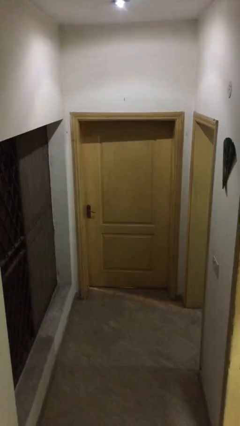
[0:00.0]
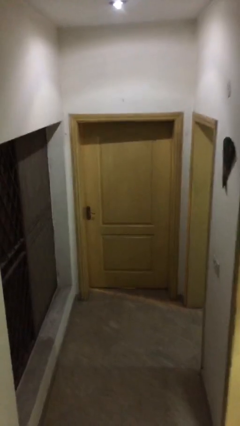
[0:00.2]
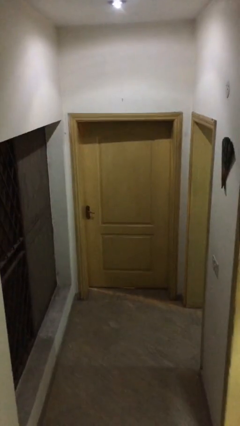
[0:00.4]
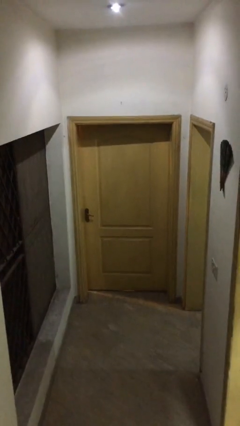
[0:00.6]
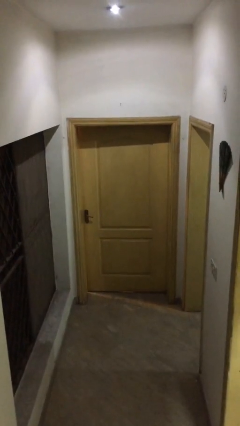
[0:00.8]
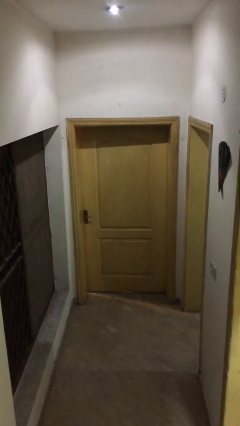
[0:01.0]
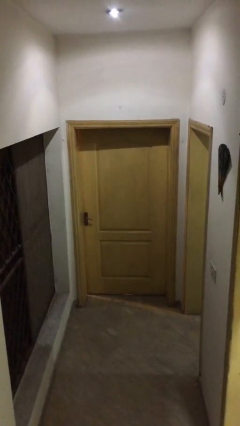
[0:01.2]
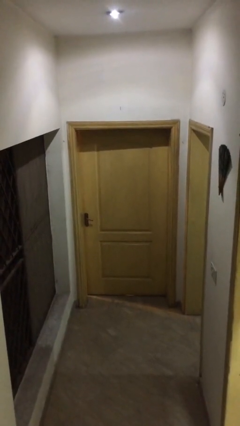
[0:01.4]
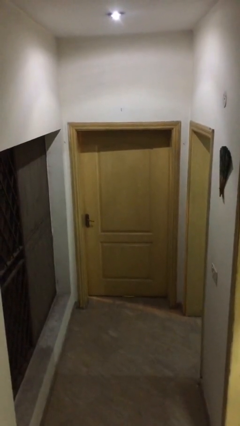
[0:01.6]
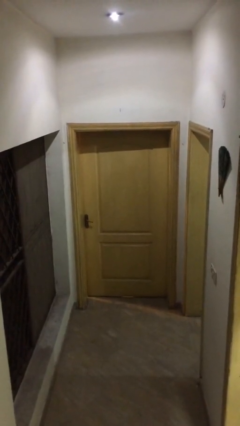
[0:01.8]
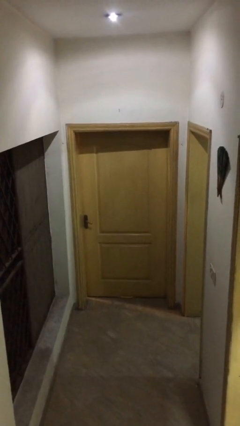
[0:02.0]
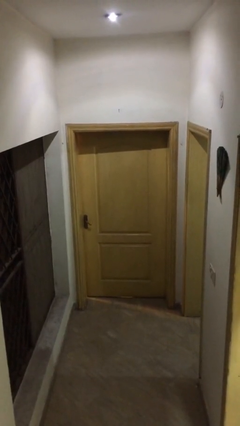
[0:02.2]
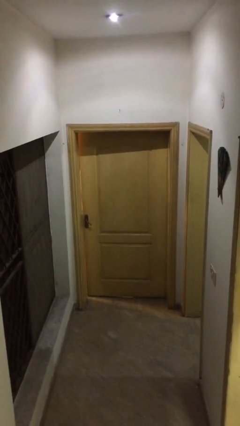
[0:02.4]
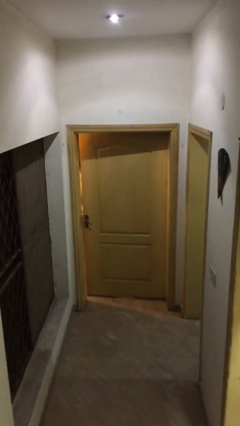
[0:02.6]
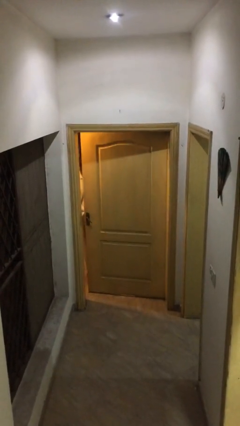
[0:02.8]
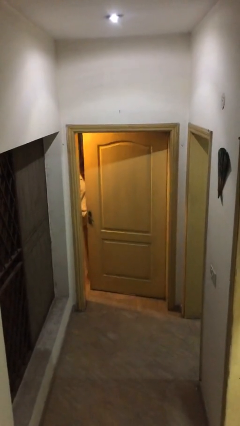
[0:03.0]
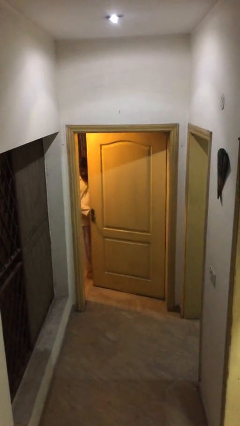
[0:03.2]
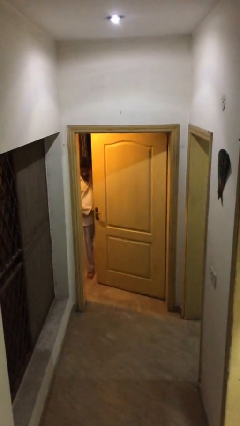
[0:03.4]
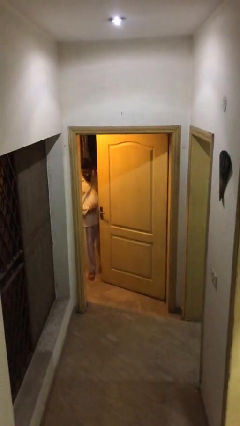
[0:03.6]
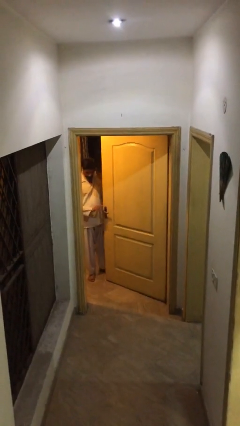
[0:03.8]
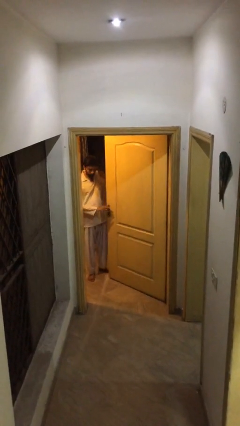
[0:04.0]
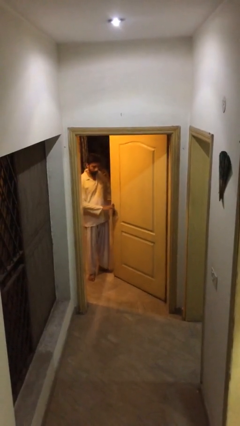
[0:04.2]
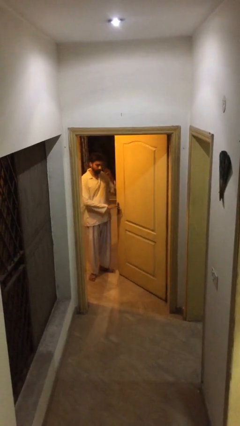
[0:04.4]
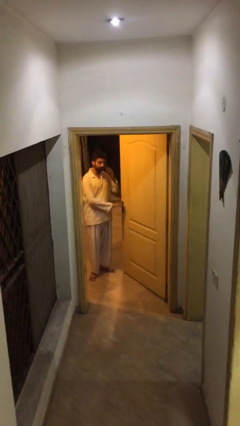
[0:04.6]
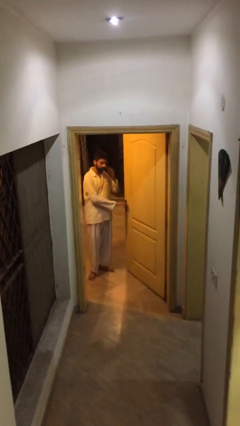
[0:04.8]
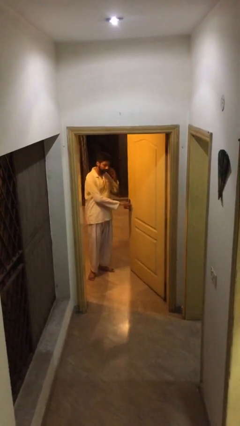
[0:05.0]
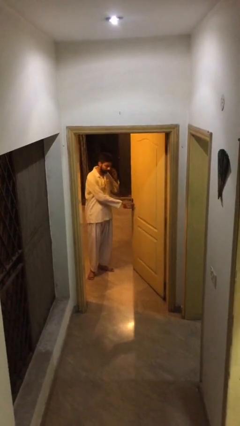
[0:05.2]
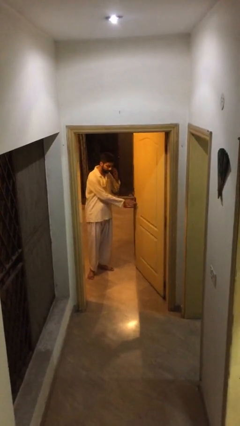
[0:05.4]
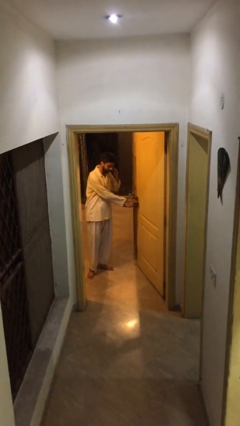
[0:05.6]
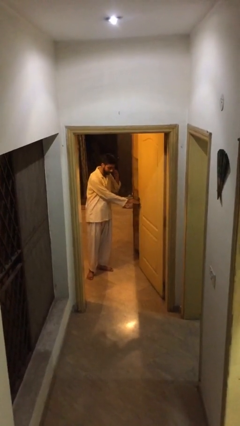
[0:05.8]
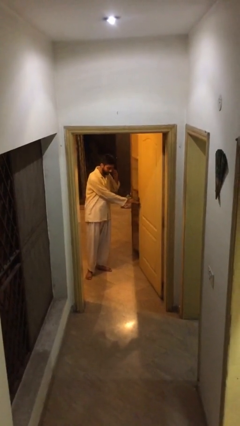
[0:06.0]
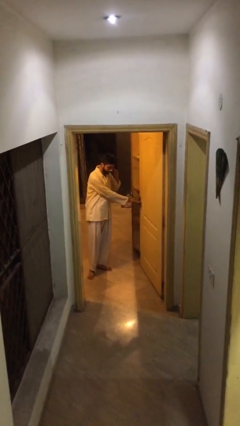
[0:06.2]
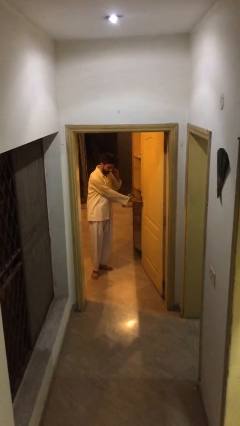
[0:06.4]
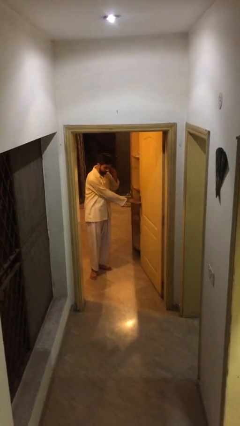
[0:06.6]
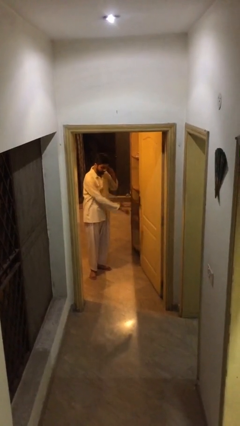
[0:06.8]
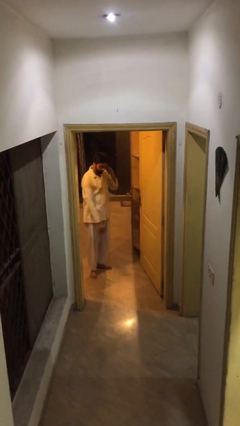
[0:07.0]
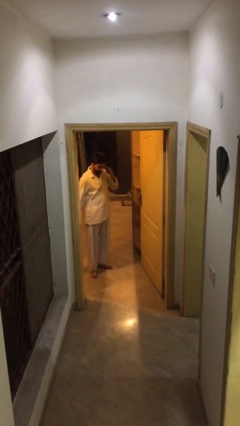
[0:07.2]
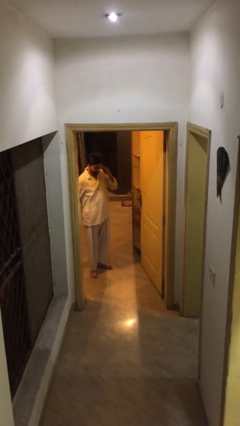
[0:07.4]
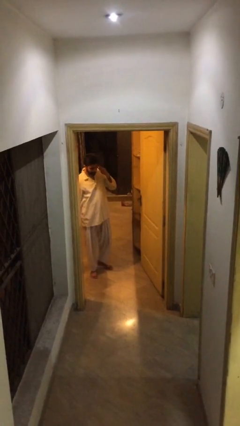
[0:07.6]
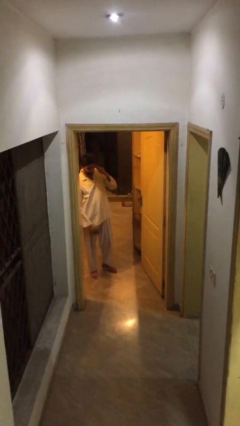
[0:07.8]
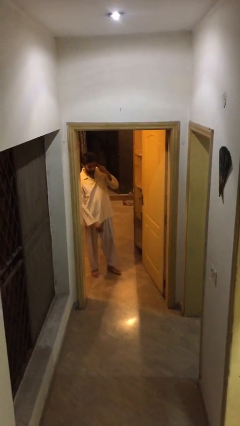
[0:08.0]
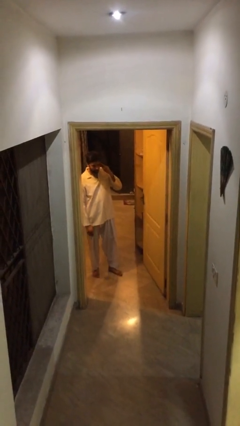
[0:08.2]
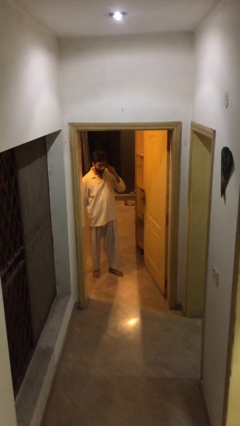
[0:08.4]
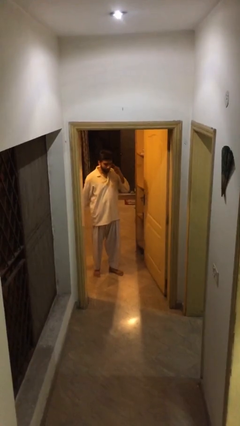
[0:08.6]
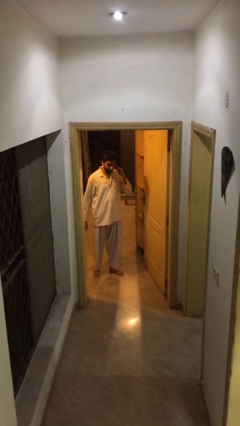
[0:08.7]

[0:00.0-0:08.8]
person opens facility door

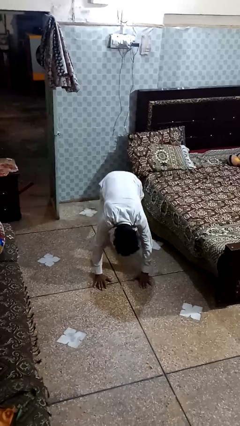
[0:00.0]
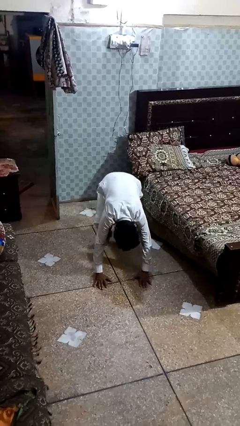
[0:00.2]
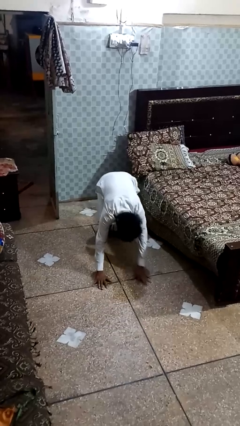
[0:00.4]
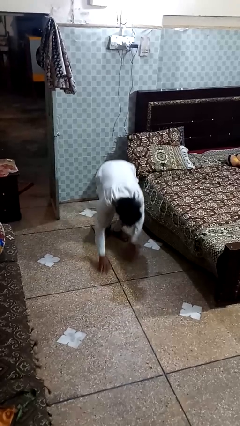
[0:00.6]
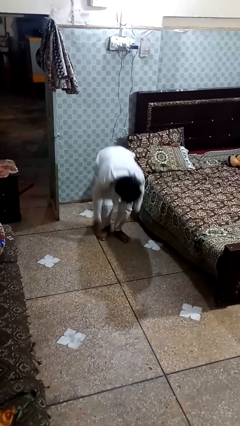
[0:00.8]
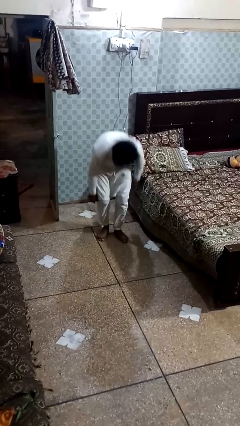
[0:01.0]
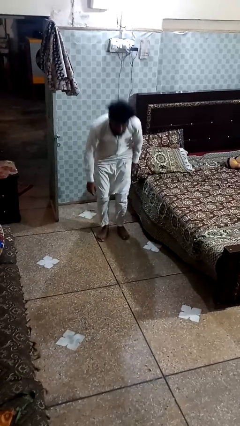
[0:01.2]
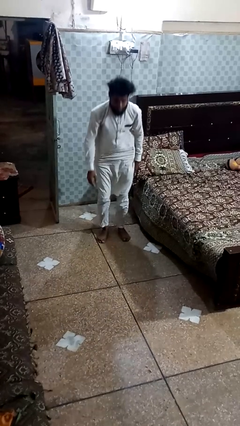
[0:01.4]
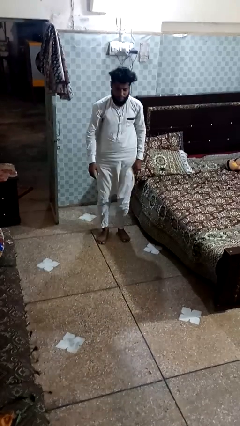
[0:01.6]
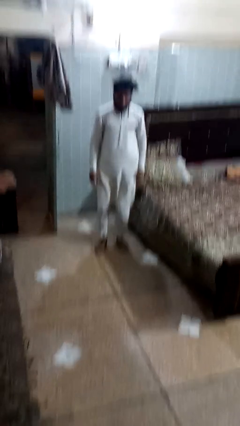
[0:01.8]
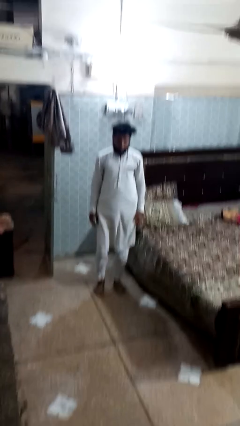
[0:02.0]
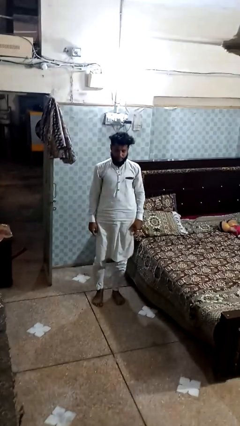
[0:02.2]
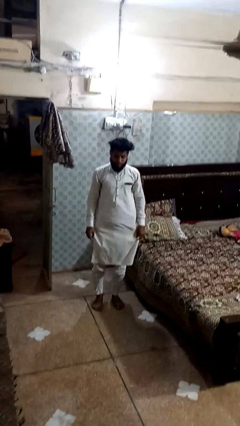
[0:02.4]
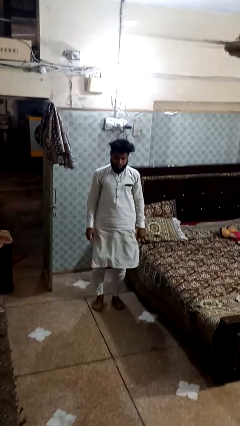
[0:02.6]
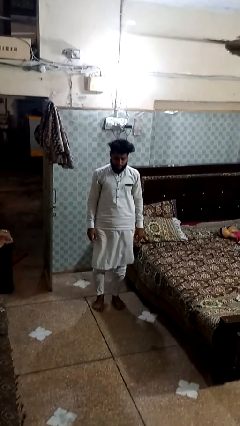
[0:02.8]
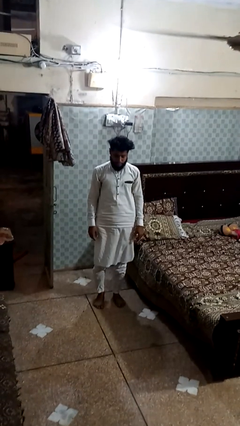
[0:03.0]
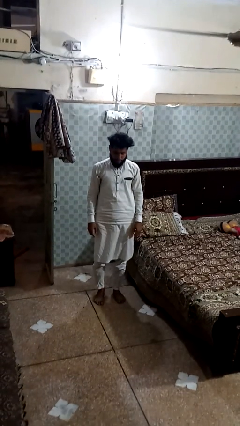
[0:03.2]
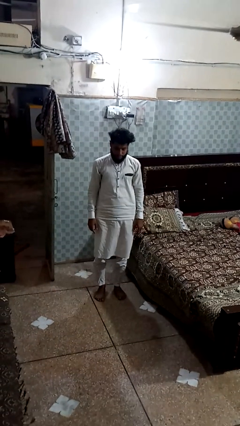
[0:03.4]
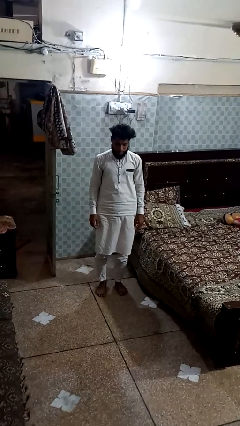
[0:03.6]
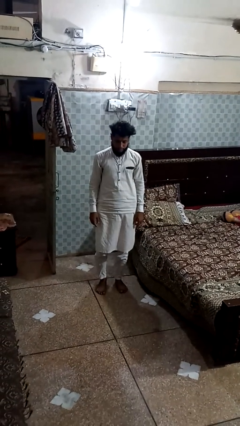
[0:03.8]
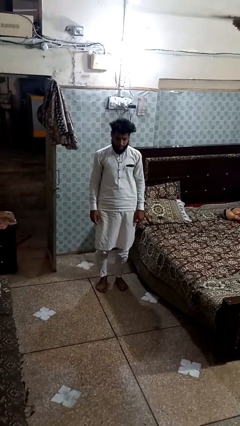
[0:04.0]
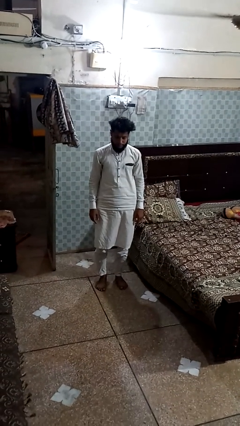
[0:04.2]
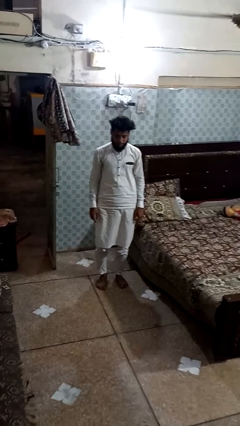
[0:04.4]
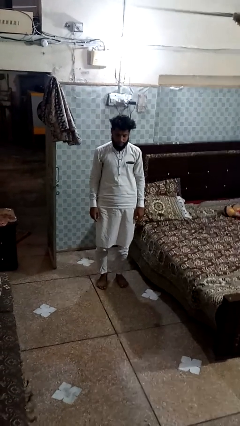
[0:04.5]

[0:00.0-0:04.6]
person exercises with plank

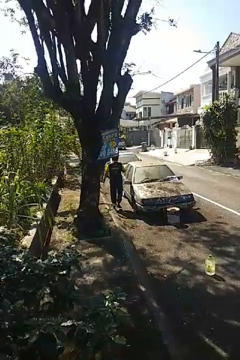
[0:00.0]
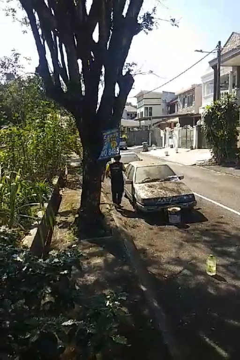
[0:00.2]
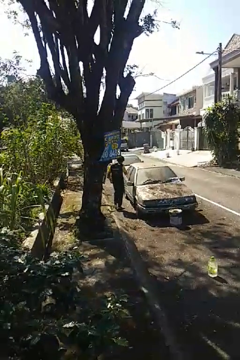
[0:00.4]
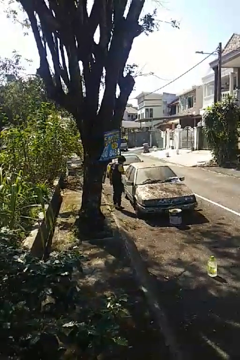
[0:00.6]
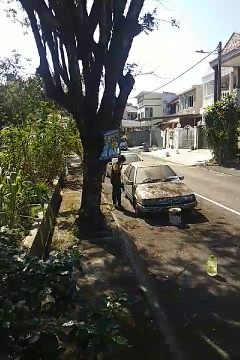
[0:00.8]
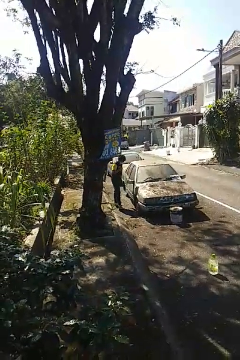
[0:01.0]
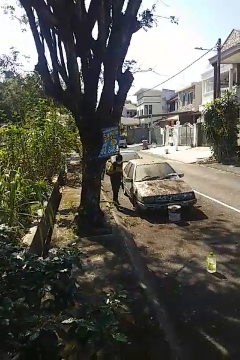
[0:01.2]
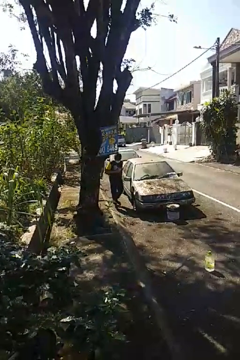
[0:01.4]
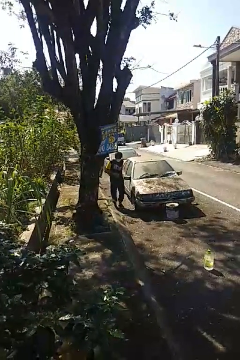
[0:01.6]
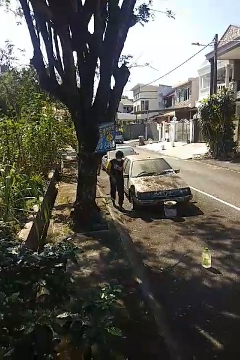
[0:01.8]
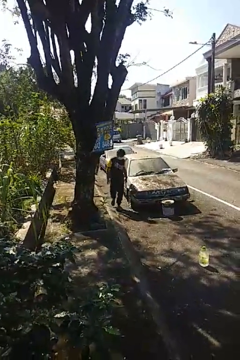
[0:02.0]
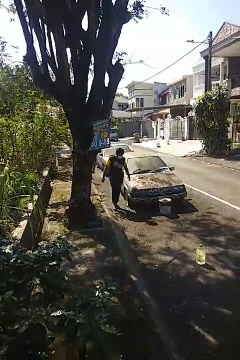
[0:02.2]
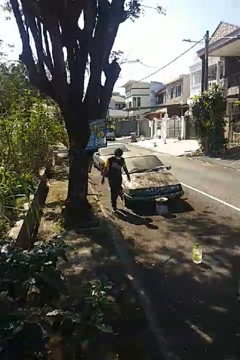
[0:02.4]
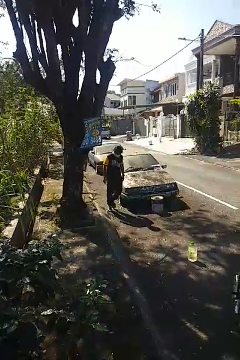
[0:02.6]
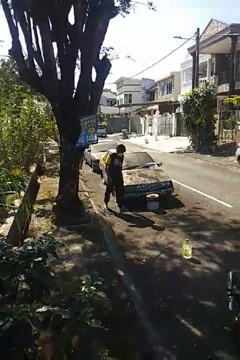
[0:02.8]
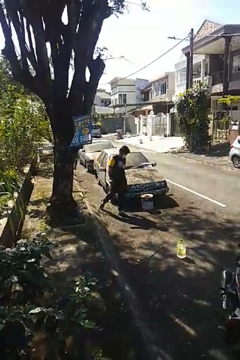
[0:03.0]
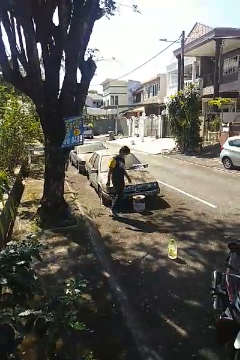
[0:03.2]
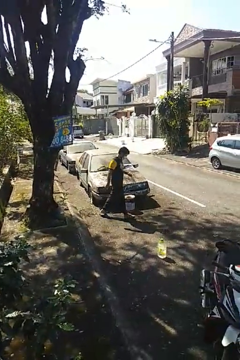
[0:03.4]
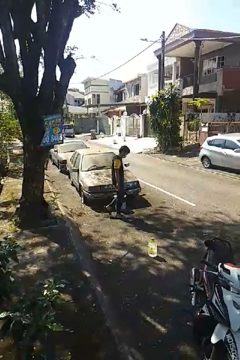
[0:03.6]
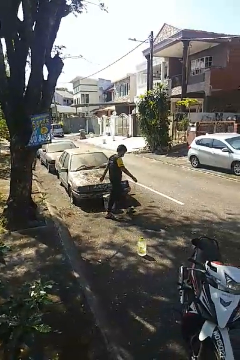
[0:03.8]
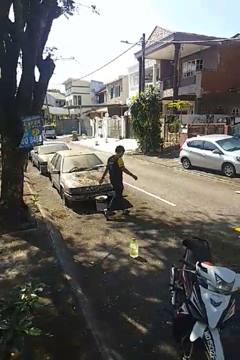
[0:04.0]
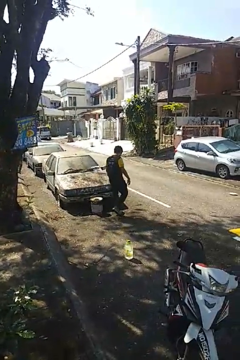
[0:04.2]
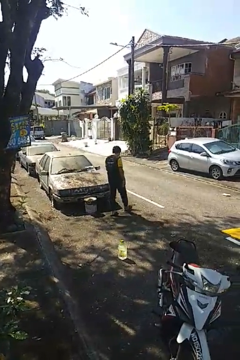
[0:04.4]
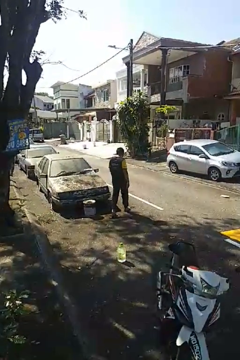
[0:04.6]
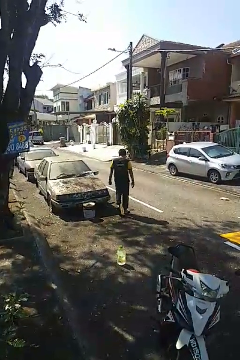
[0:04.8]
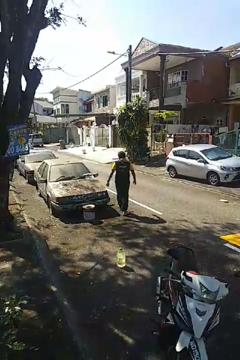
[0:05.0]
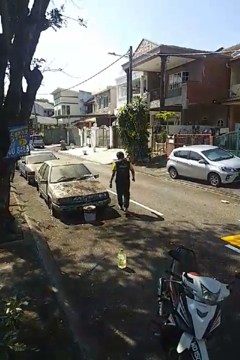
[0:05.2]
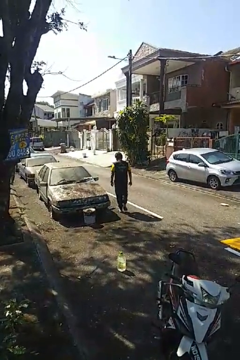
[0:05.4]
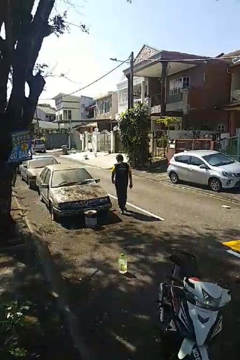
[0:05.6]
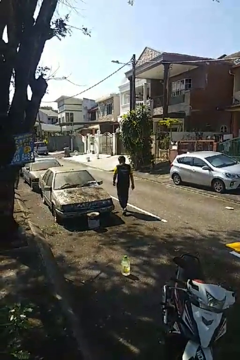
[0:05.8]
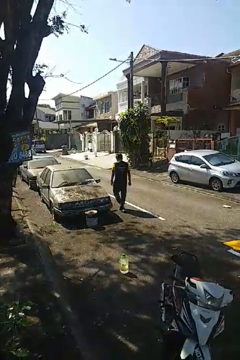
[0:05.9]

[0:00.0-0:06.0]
person walks around car
